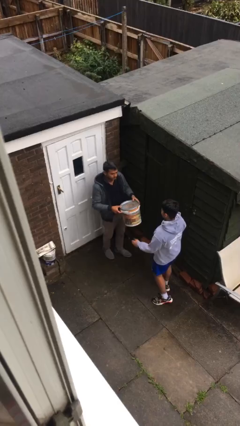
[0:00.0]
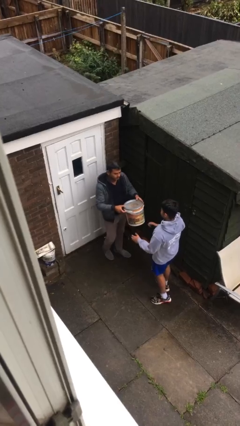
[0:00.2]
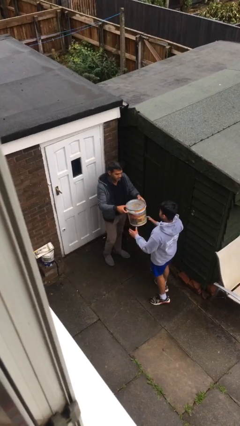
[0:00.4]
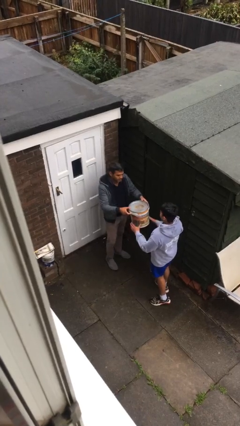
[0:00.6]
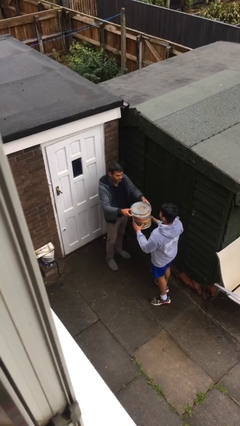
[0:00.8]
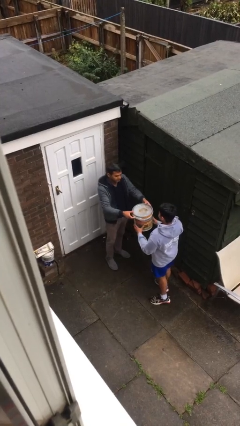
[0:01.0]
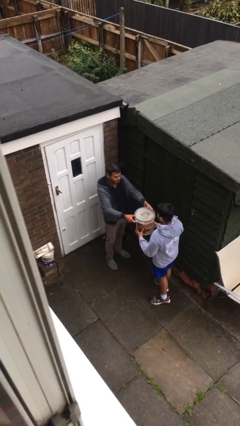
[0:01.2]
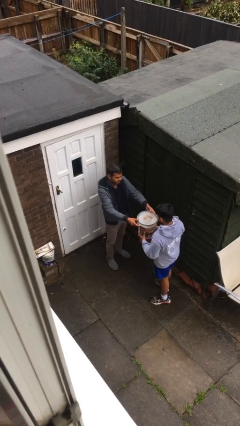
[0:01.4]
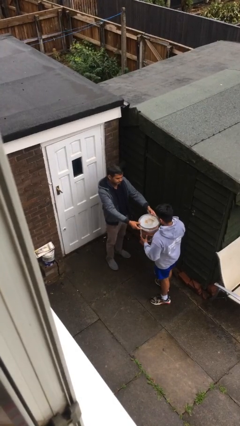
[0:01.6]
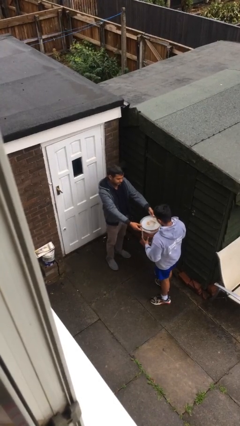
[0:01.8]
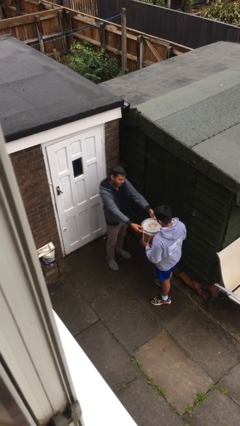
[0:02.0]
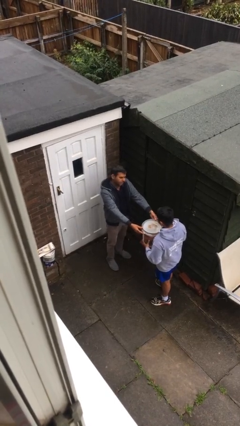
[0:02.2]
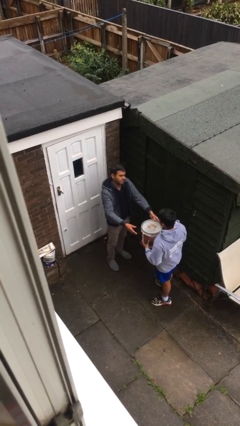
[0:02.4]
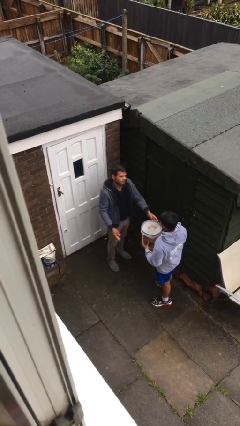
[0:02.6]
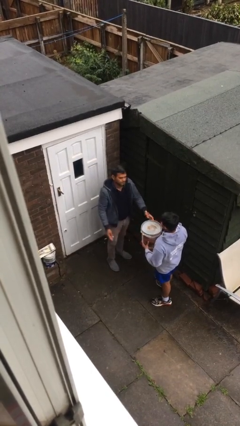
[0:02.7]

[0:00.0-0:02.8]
person transfers object to person

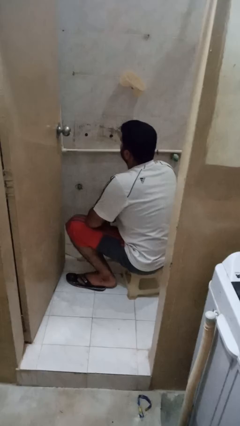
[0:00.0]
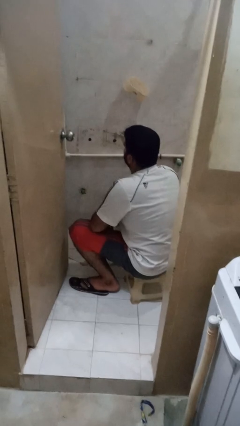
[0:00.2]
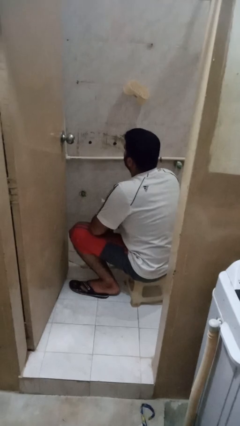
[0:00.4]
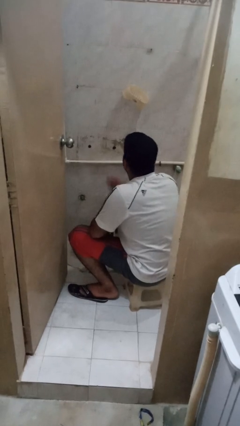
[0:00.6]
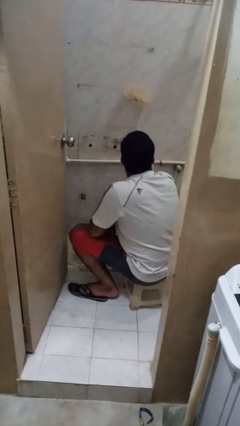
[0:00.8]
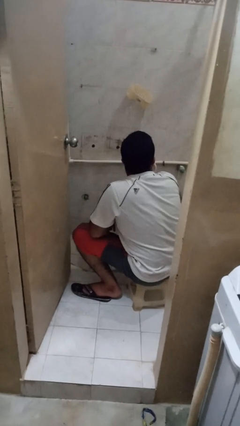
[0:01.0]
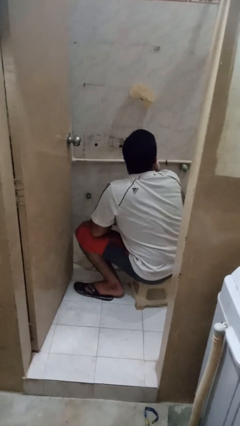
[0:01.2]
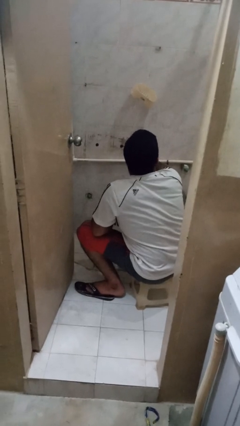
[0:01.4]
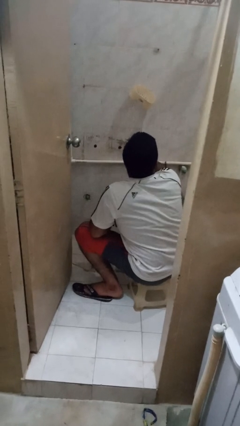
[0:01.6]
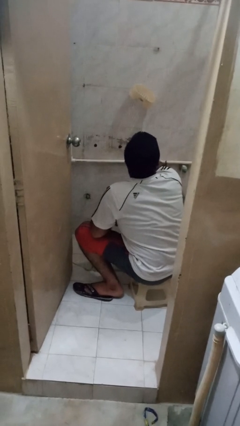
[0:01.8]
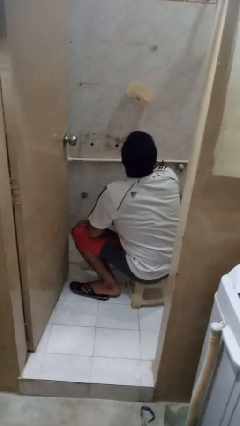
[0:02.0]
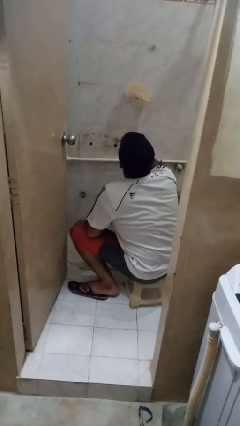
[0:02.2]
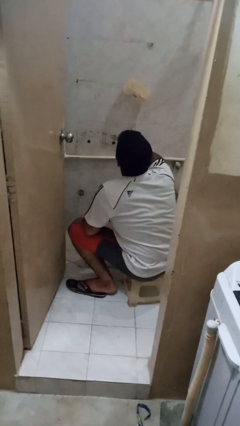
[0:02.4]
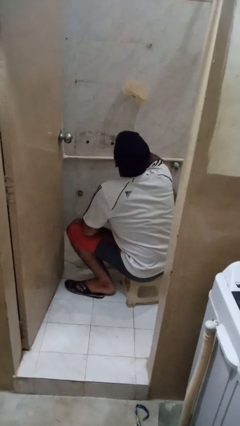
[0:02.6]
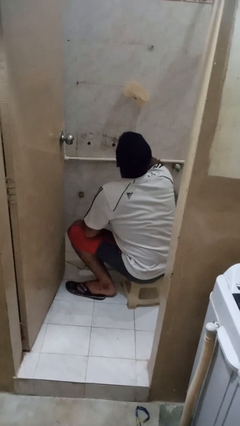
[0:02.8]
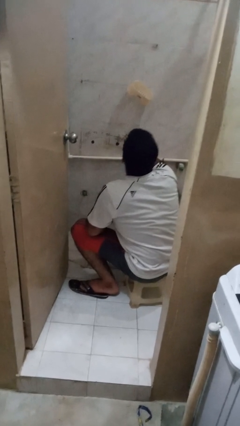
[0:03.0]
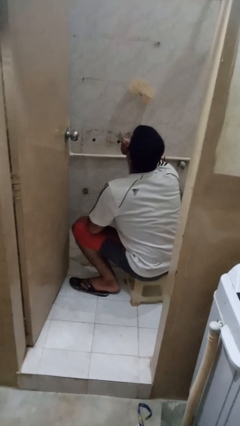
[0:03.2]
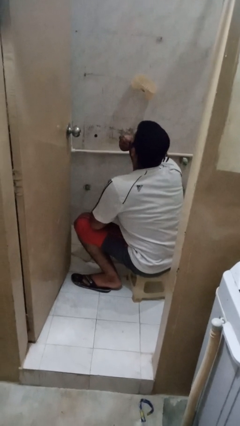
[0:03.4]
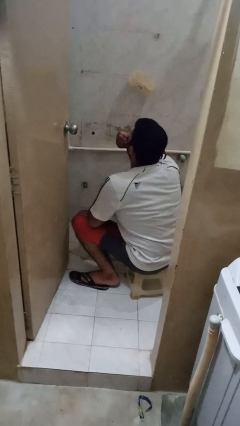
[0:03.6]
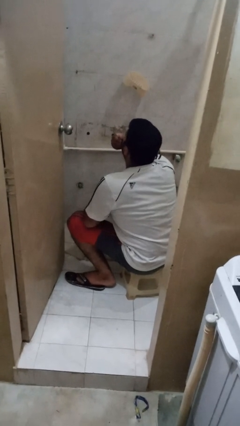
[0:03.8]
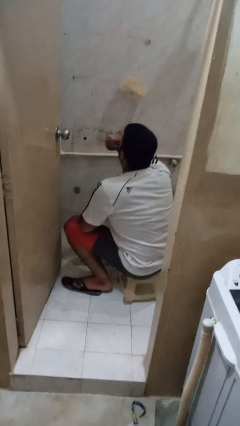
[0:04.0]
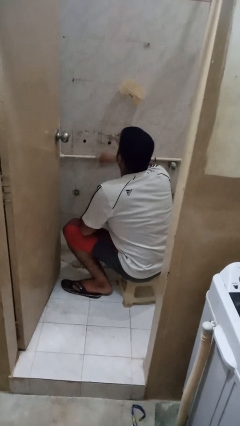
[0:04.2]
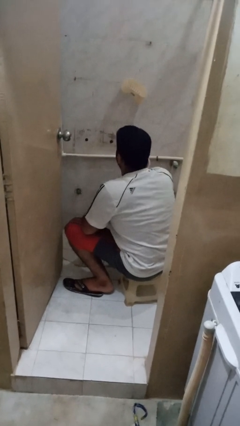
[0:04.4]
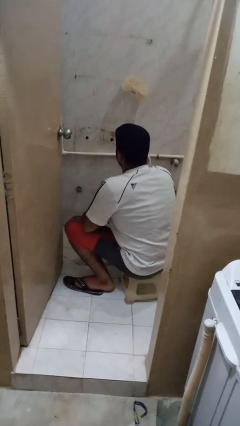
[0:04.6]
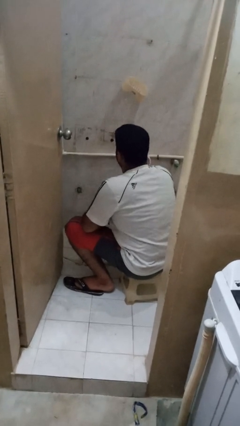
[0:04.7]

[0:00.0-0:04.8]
person flosses

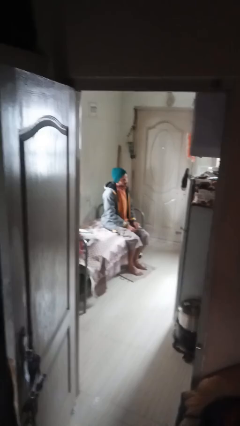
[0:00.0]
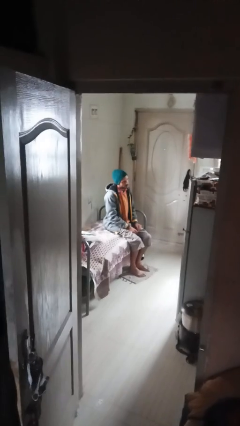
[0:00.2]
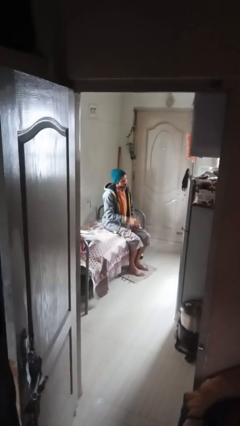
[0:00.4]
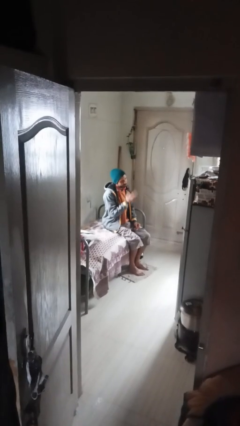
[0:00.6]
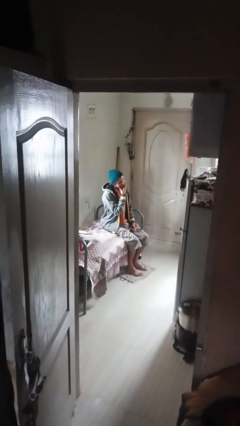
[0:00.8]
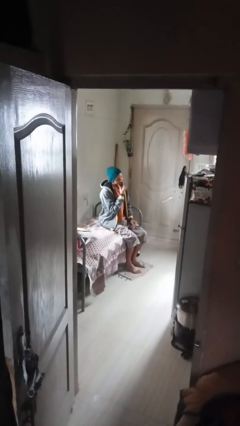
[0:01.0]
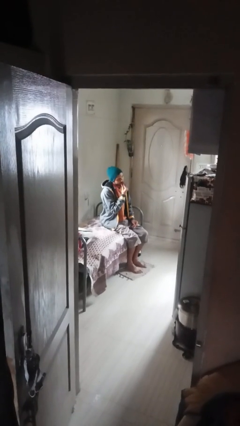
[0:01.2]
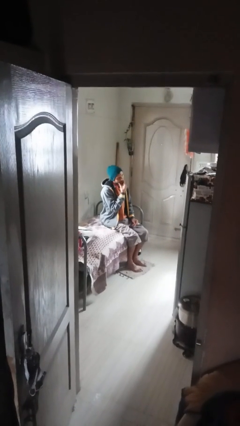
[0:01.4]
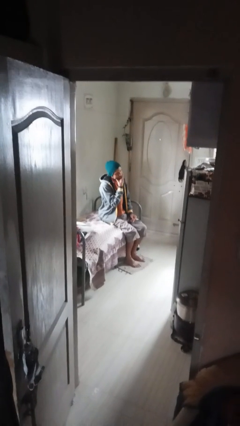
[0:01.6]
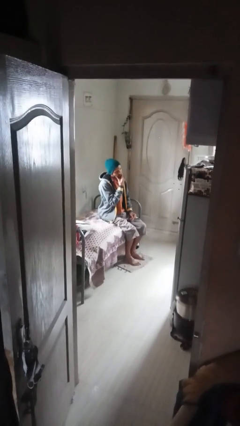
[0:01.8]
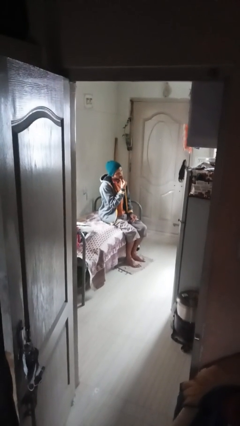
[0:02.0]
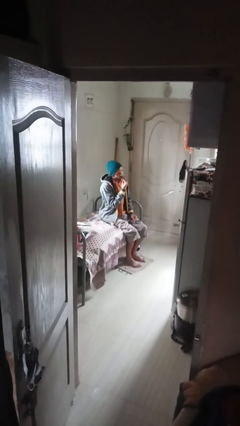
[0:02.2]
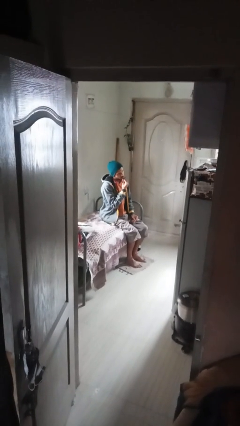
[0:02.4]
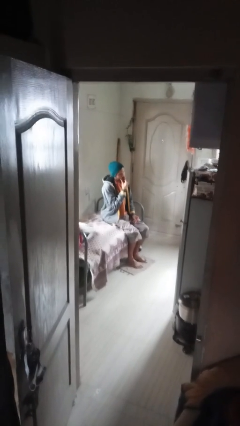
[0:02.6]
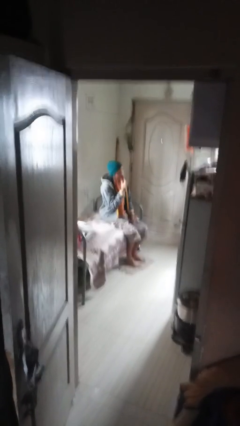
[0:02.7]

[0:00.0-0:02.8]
person strokes chin

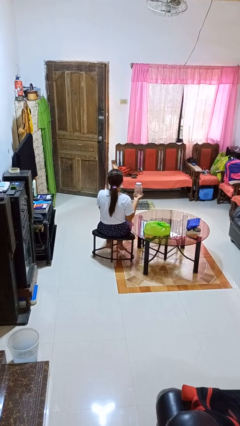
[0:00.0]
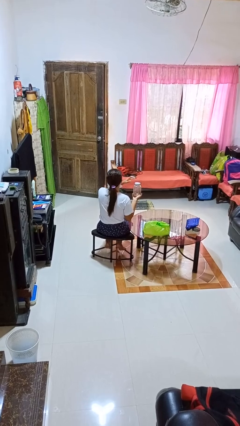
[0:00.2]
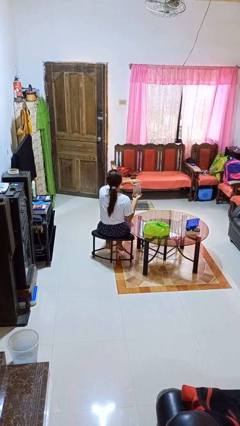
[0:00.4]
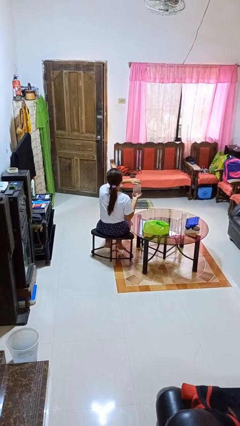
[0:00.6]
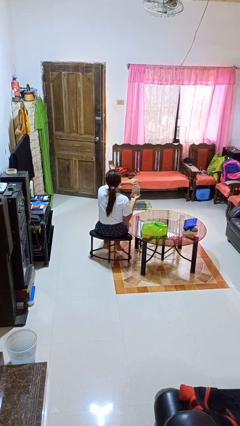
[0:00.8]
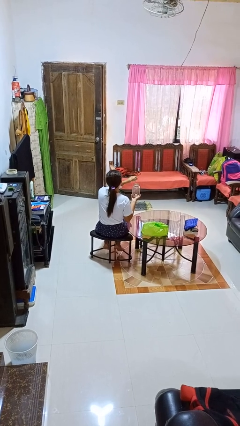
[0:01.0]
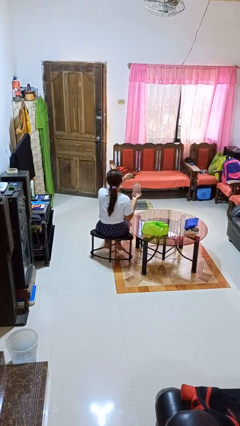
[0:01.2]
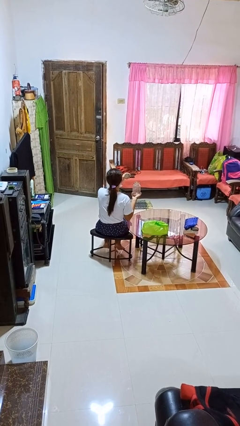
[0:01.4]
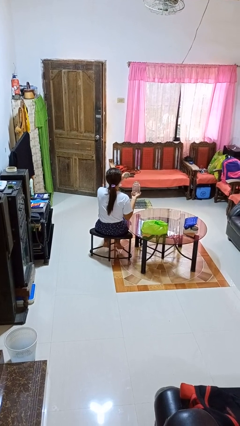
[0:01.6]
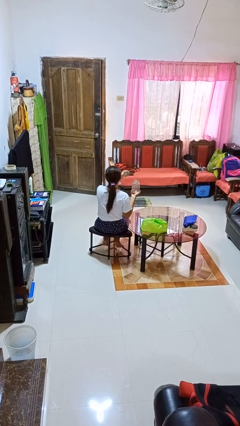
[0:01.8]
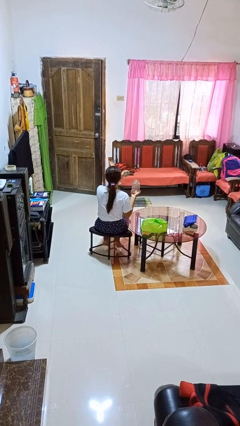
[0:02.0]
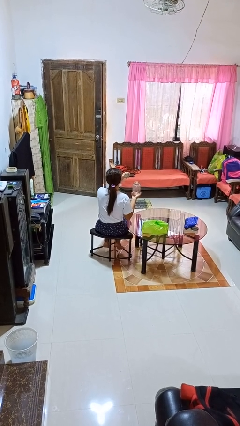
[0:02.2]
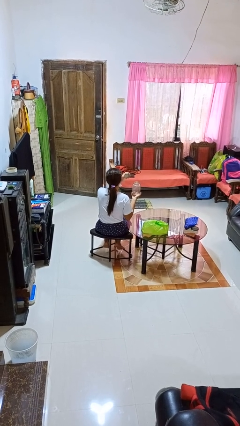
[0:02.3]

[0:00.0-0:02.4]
person opens jar

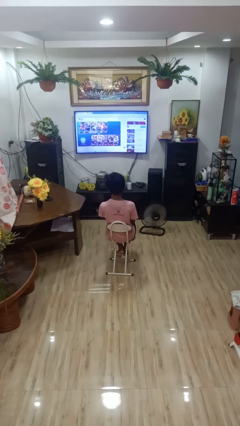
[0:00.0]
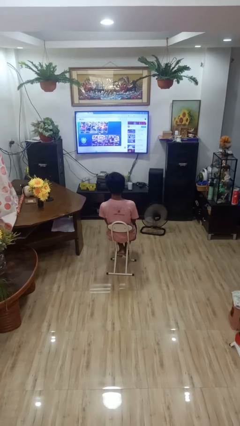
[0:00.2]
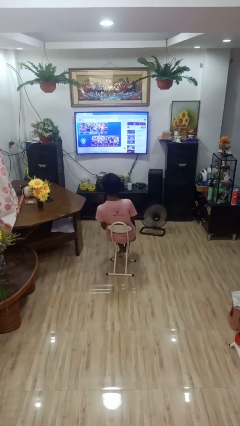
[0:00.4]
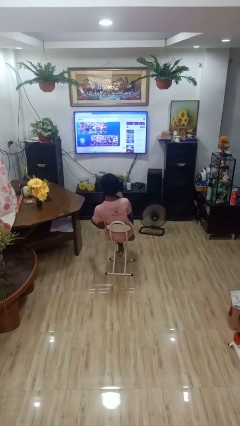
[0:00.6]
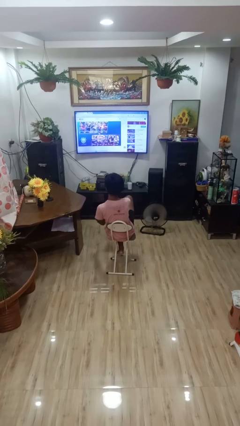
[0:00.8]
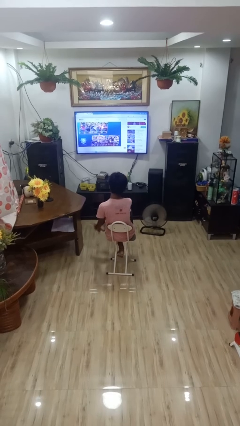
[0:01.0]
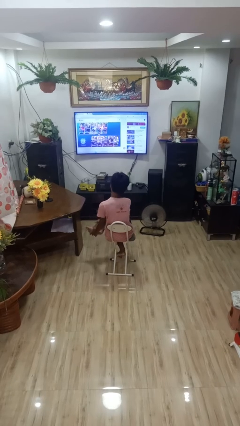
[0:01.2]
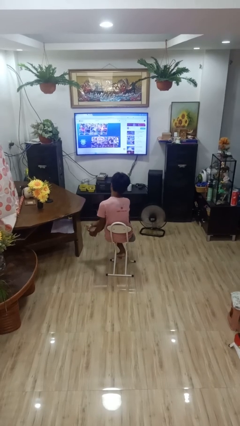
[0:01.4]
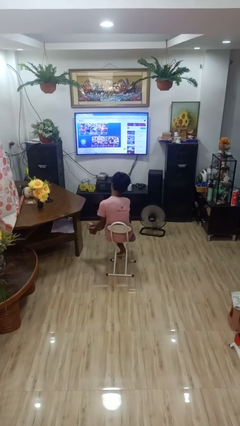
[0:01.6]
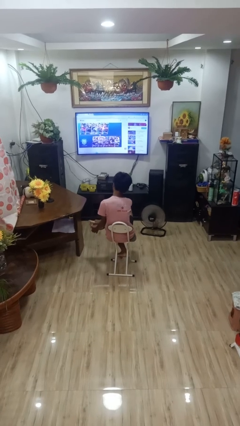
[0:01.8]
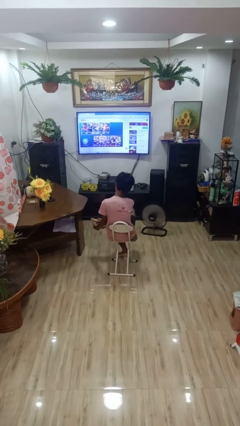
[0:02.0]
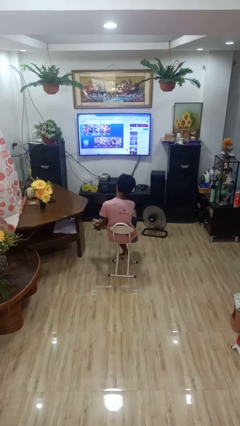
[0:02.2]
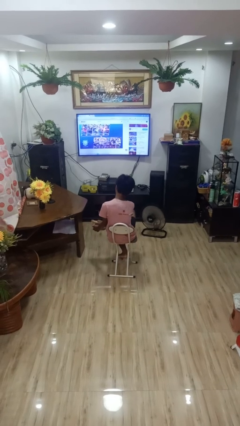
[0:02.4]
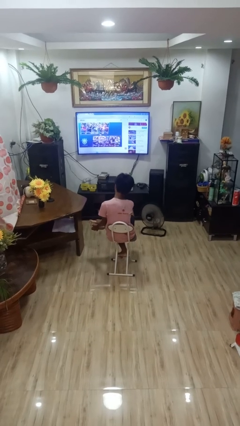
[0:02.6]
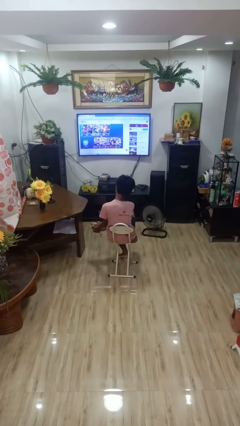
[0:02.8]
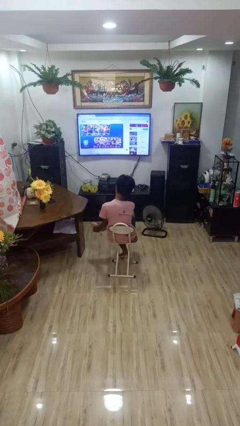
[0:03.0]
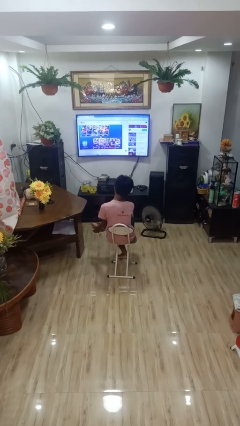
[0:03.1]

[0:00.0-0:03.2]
person rubs foot

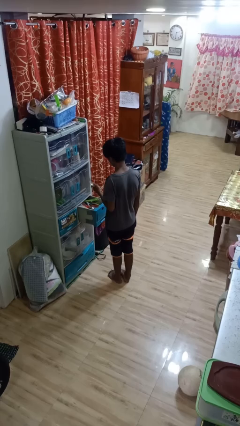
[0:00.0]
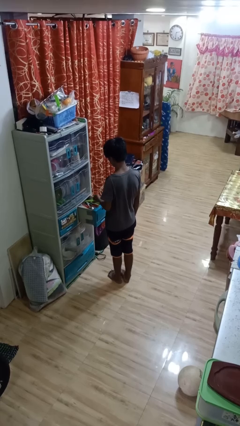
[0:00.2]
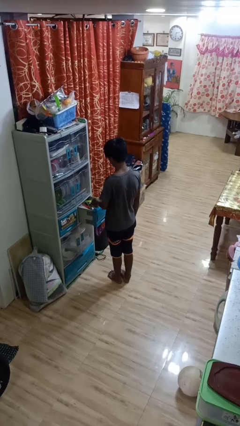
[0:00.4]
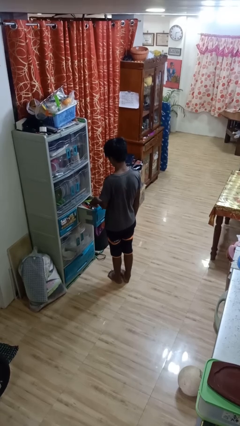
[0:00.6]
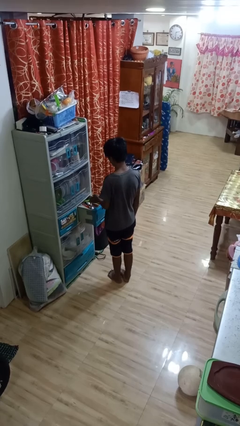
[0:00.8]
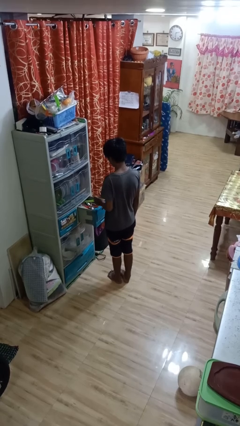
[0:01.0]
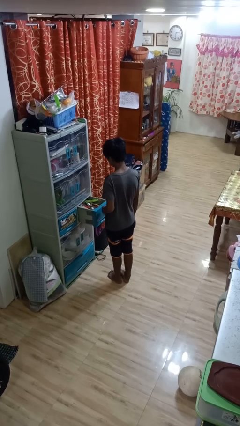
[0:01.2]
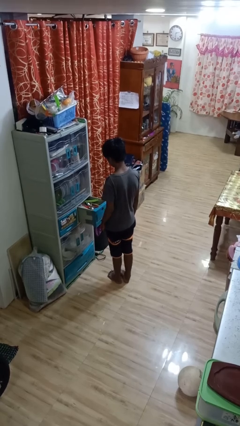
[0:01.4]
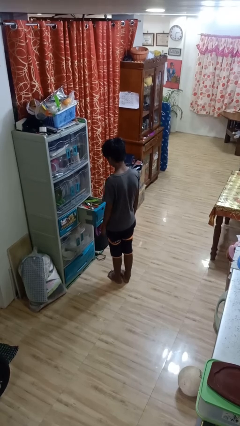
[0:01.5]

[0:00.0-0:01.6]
person puts object into kitchen drawer
